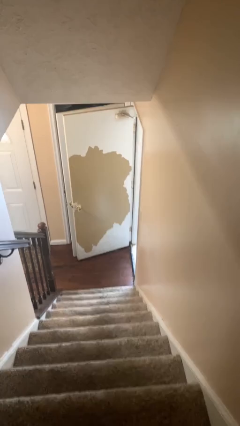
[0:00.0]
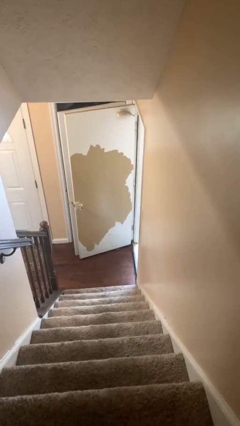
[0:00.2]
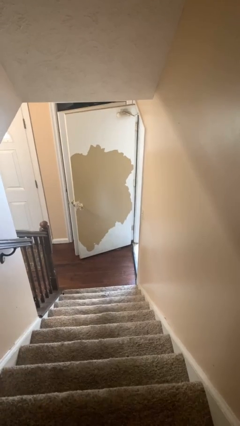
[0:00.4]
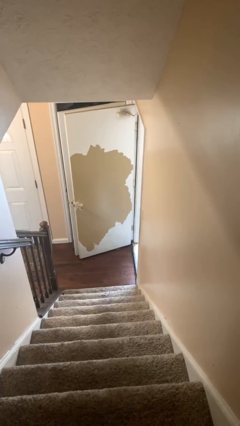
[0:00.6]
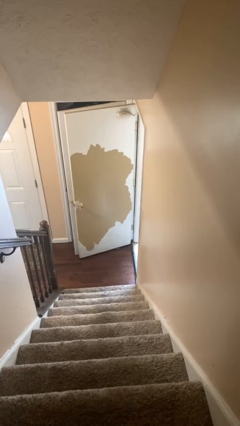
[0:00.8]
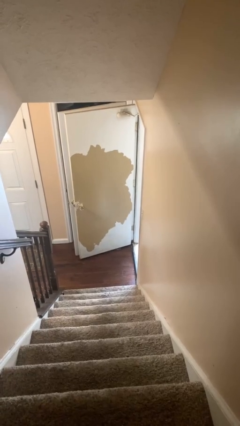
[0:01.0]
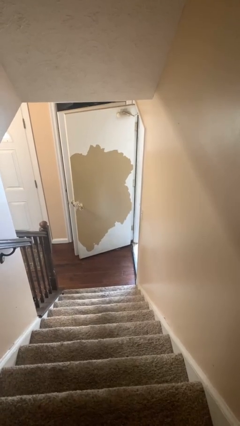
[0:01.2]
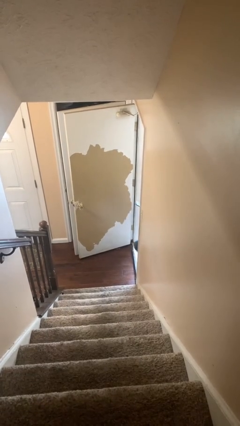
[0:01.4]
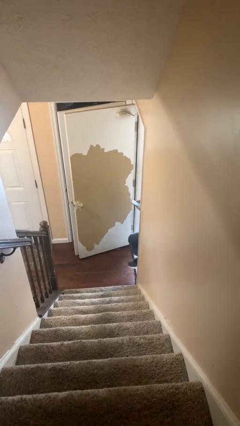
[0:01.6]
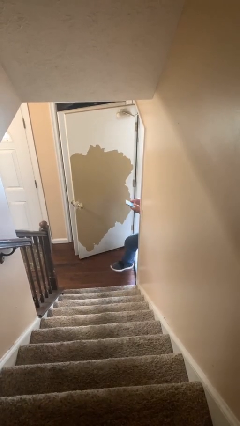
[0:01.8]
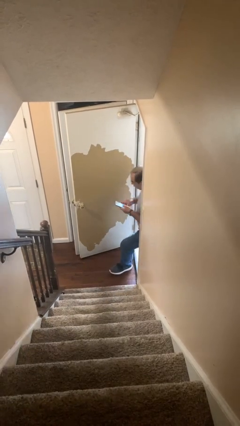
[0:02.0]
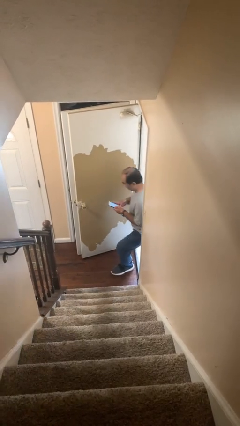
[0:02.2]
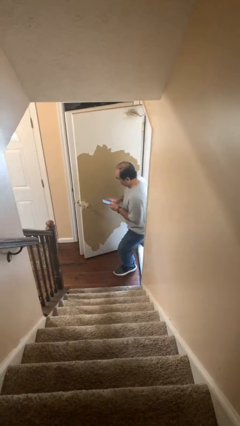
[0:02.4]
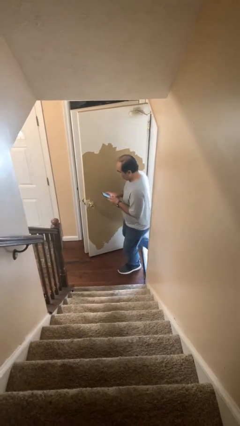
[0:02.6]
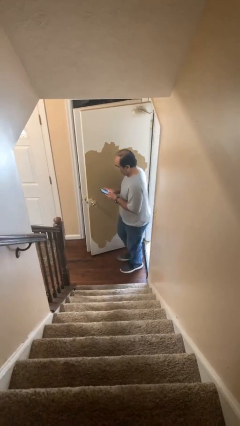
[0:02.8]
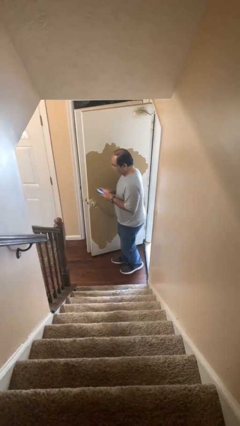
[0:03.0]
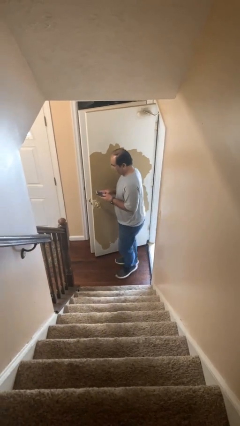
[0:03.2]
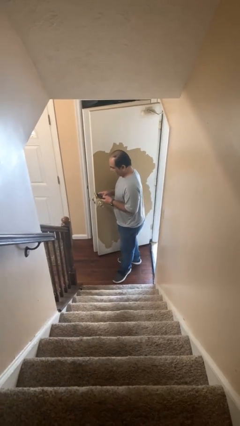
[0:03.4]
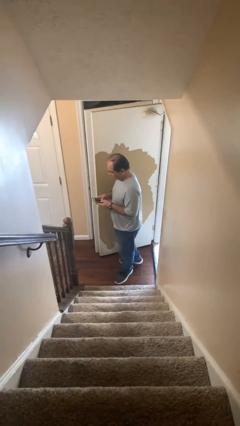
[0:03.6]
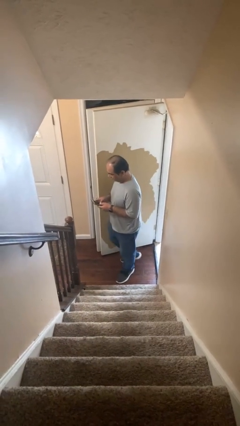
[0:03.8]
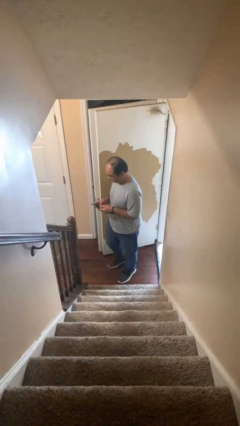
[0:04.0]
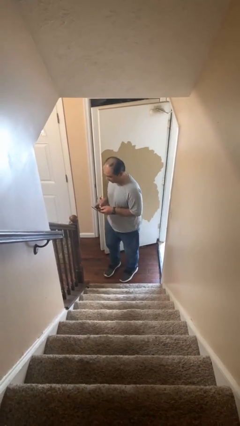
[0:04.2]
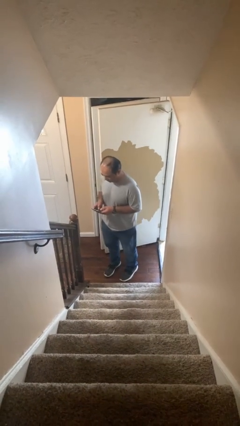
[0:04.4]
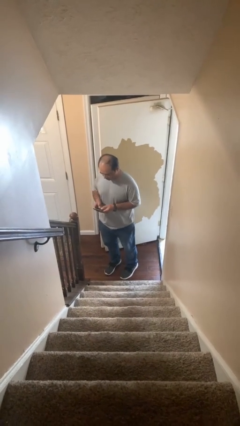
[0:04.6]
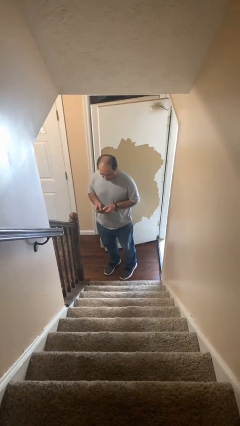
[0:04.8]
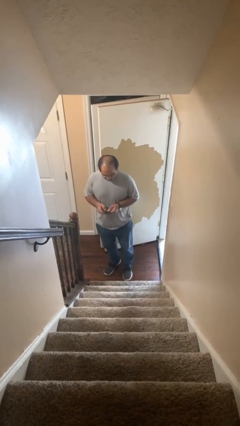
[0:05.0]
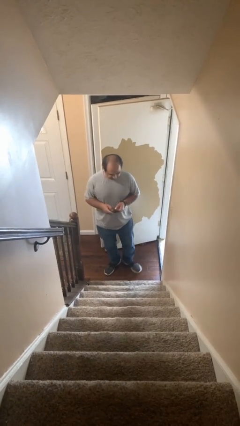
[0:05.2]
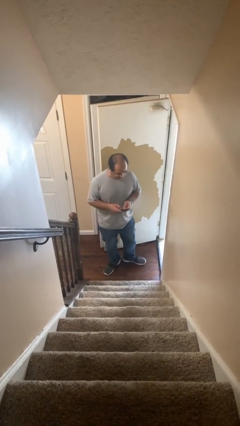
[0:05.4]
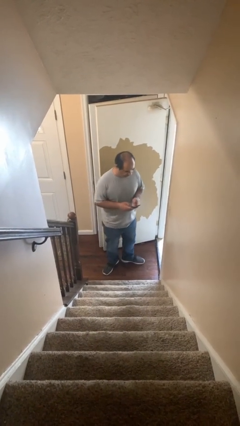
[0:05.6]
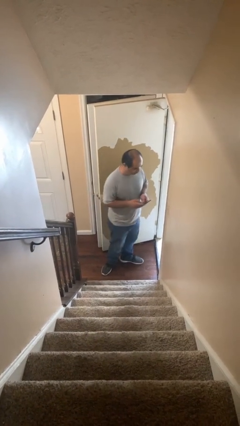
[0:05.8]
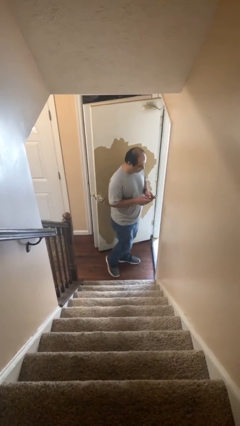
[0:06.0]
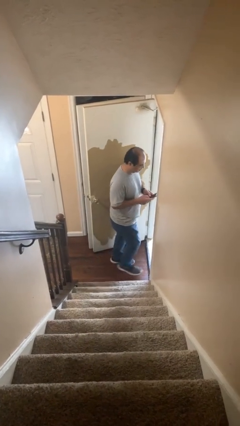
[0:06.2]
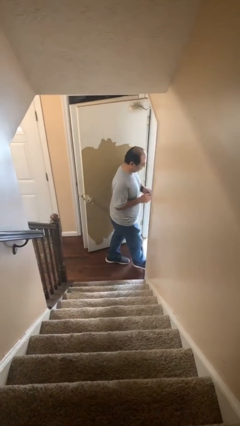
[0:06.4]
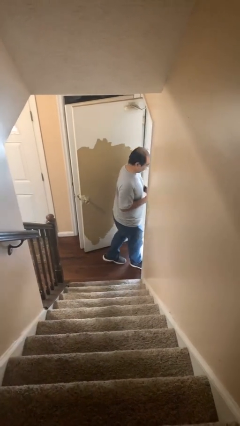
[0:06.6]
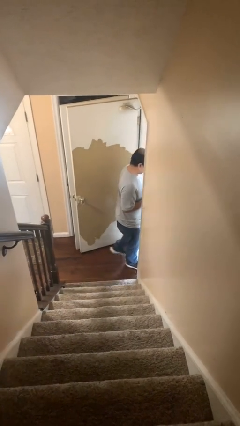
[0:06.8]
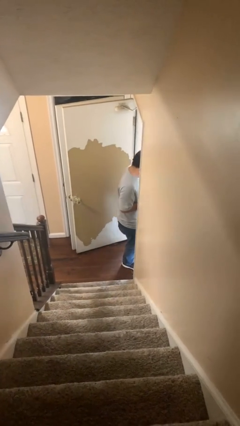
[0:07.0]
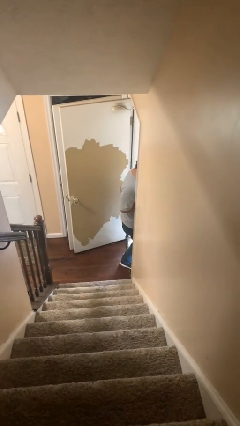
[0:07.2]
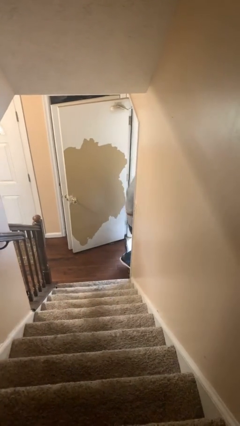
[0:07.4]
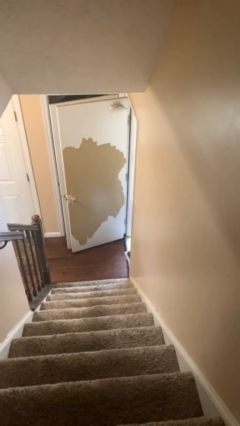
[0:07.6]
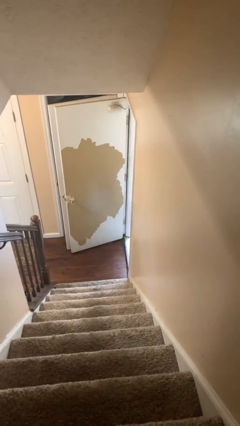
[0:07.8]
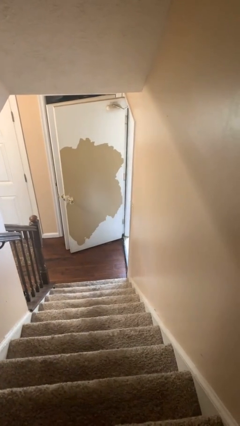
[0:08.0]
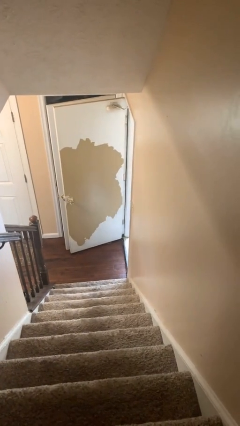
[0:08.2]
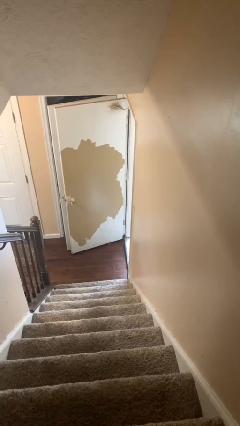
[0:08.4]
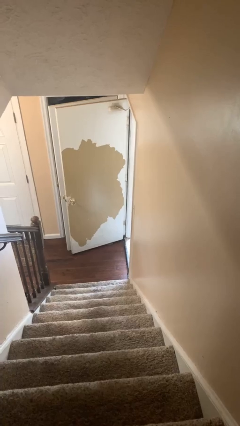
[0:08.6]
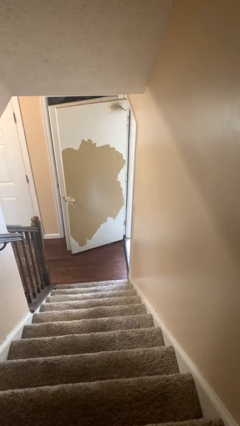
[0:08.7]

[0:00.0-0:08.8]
person enters scene through structure

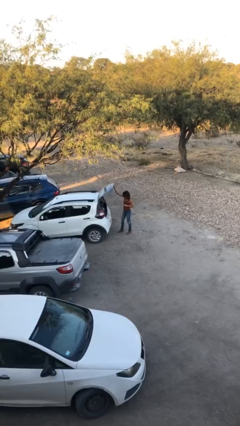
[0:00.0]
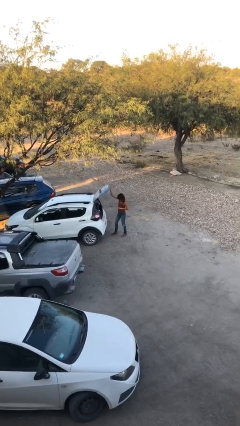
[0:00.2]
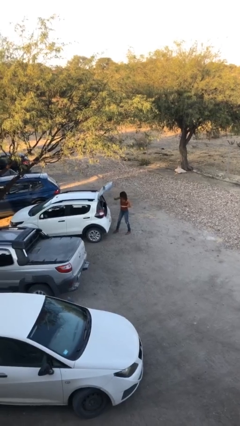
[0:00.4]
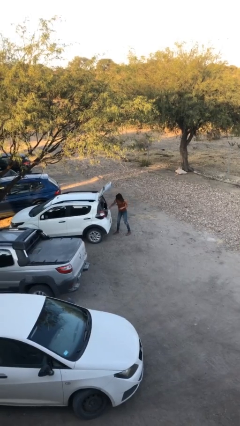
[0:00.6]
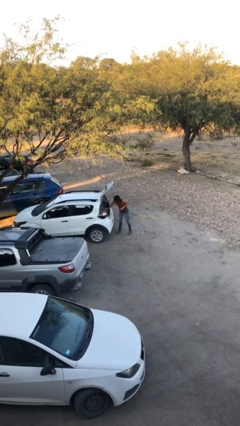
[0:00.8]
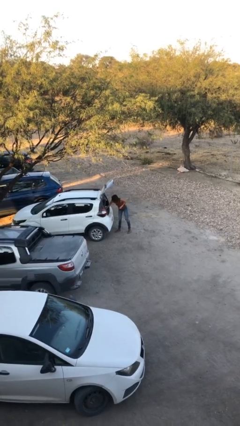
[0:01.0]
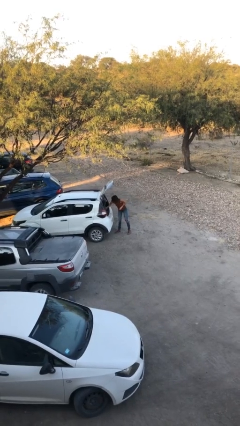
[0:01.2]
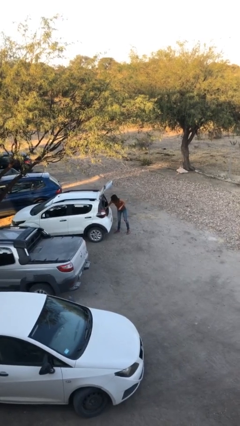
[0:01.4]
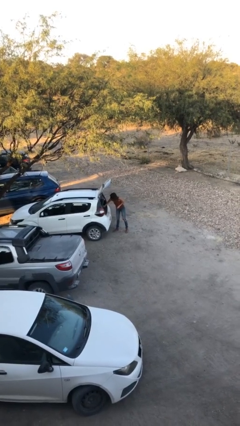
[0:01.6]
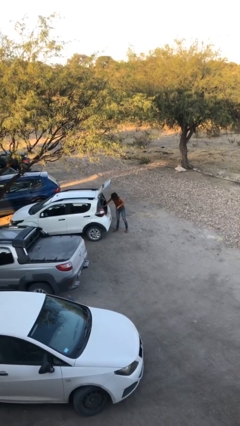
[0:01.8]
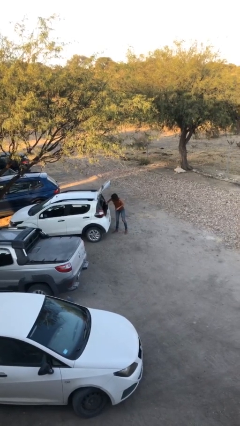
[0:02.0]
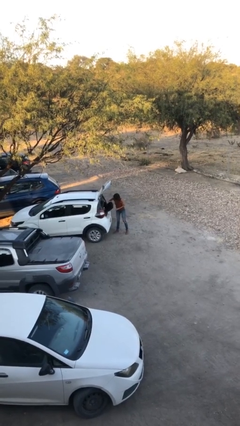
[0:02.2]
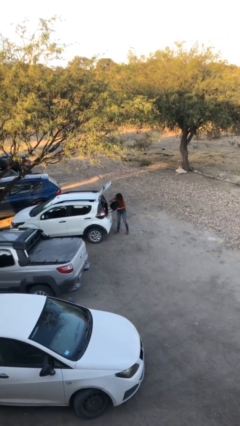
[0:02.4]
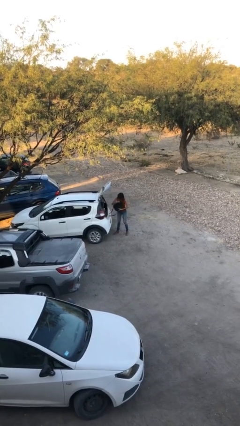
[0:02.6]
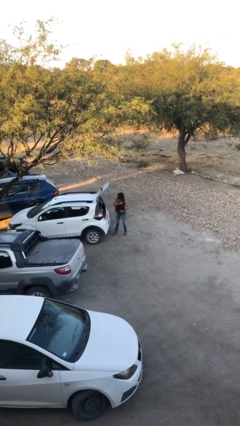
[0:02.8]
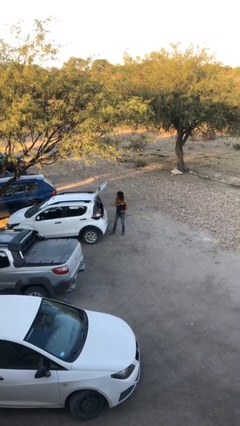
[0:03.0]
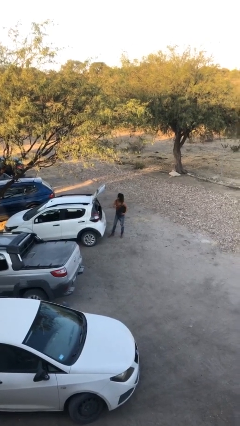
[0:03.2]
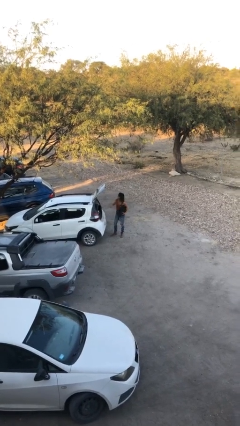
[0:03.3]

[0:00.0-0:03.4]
person unloads car

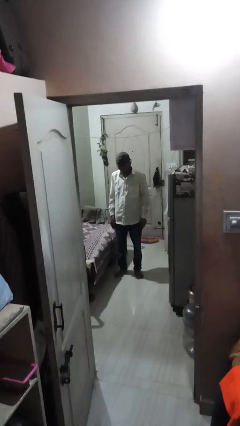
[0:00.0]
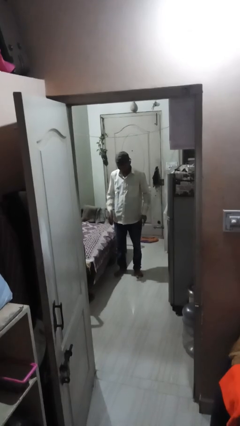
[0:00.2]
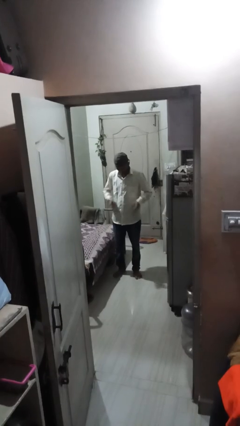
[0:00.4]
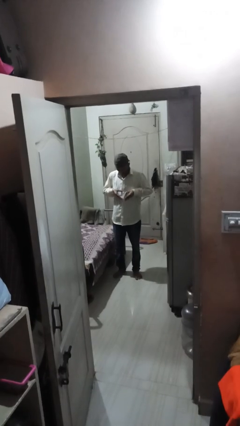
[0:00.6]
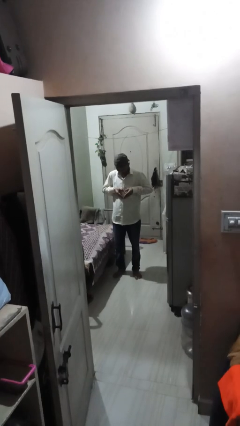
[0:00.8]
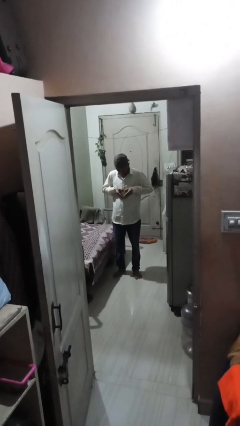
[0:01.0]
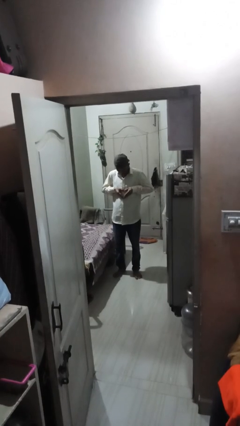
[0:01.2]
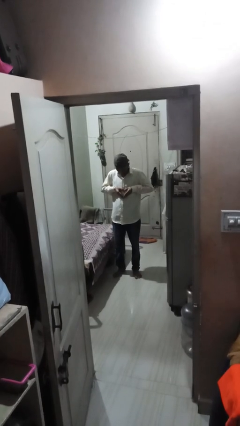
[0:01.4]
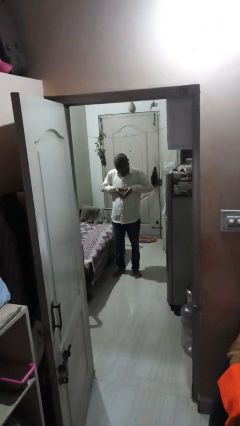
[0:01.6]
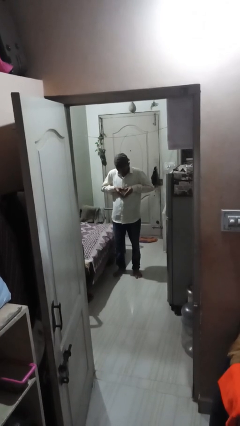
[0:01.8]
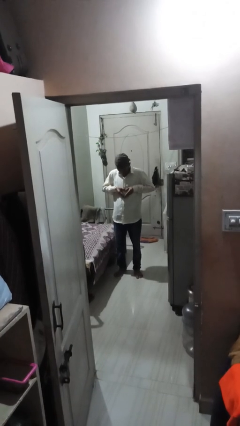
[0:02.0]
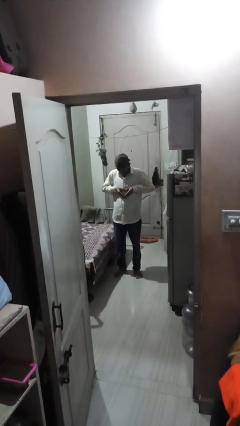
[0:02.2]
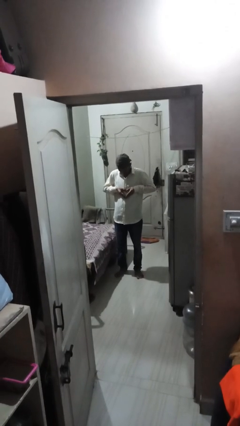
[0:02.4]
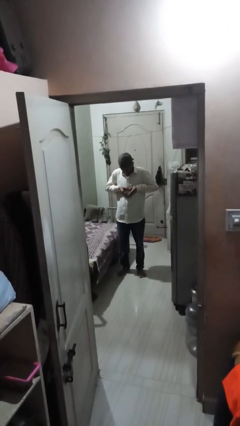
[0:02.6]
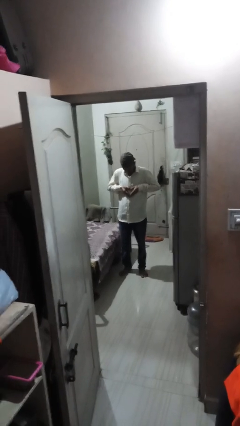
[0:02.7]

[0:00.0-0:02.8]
person gestures heart

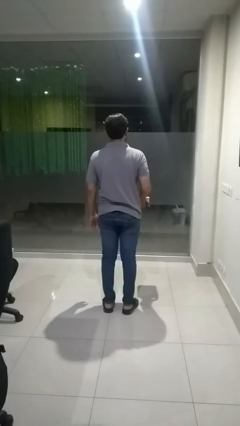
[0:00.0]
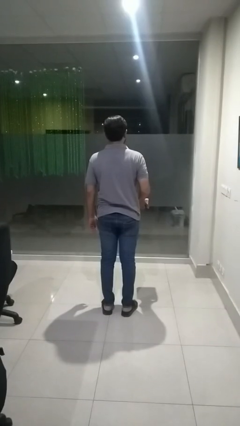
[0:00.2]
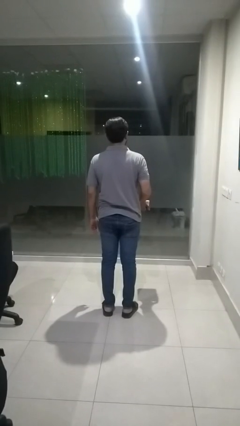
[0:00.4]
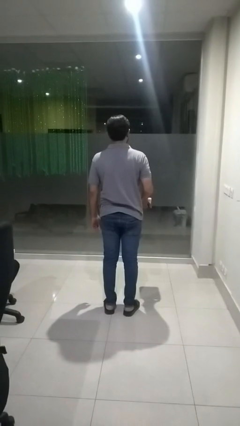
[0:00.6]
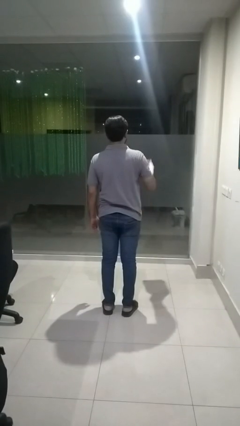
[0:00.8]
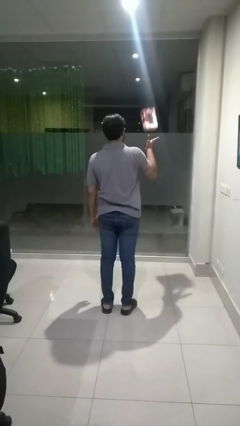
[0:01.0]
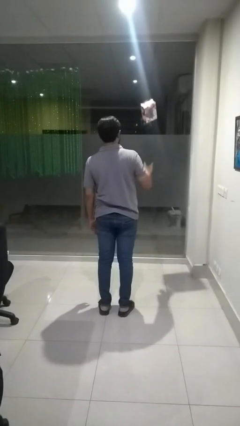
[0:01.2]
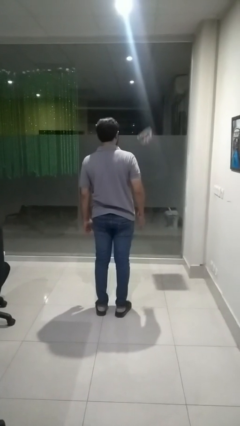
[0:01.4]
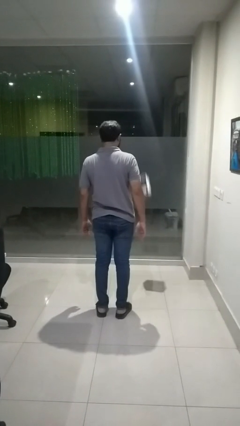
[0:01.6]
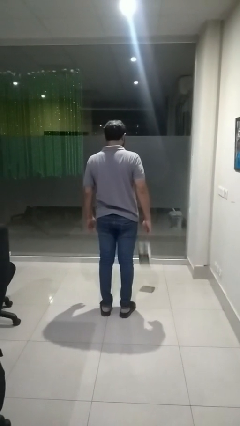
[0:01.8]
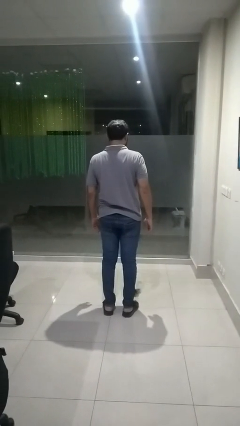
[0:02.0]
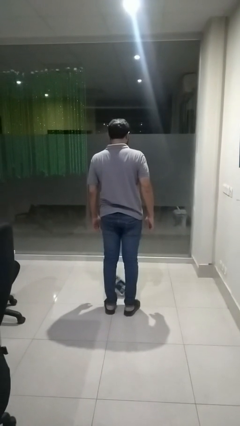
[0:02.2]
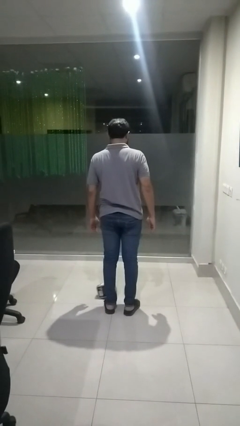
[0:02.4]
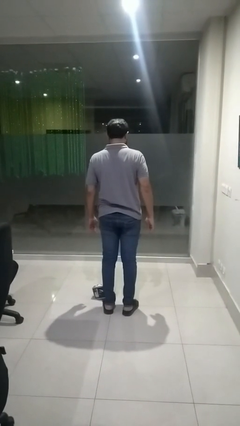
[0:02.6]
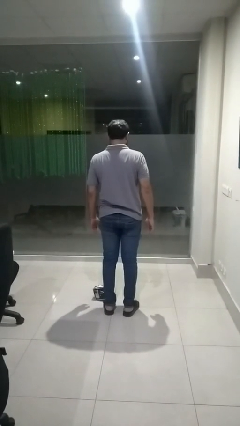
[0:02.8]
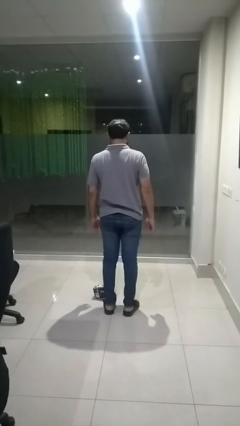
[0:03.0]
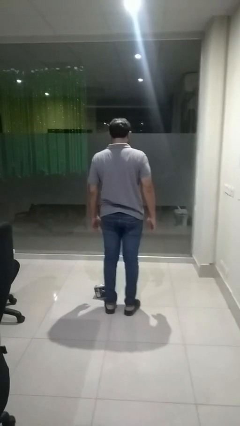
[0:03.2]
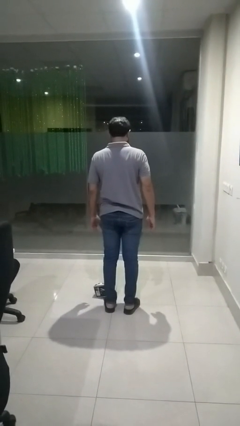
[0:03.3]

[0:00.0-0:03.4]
person throws object into air
